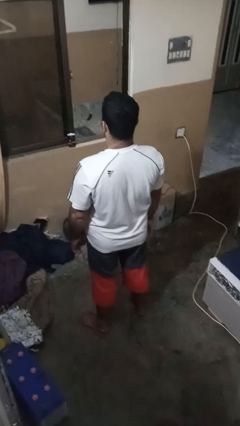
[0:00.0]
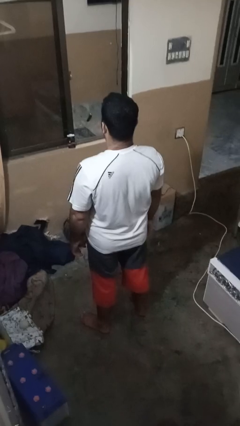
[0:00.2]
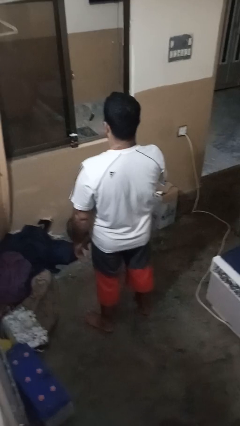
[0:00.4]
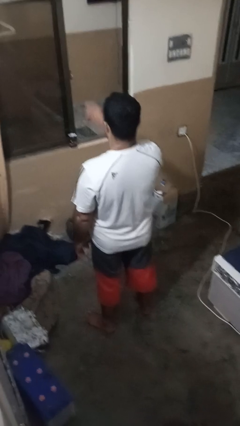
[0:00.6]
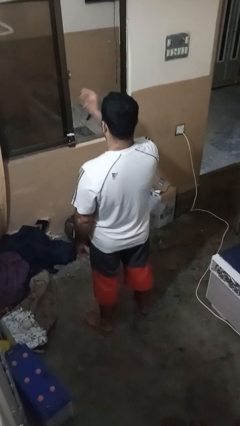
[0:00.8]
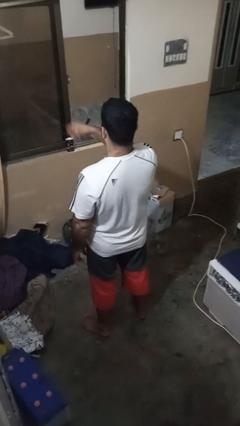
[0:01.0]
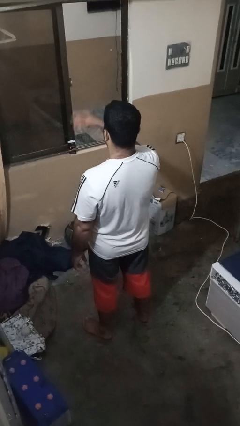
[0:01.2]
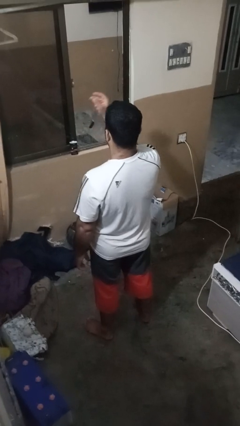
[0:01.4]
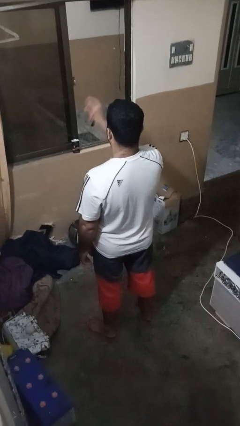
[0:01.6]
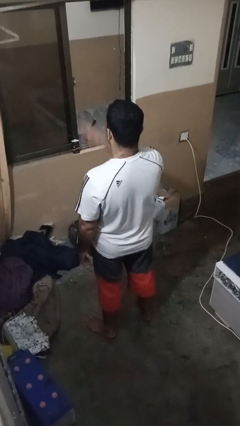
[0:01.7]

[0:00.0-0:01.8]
person snaps fingers

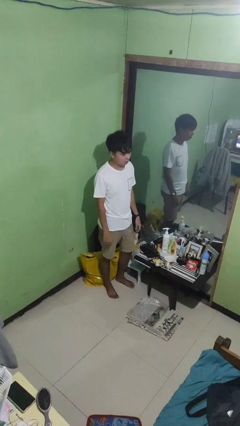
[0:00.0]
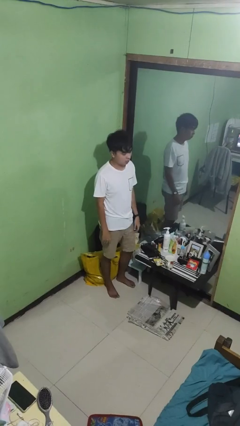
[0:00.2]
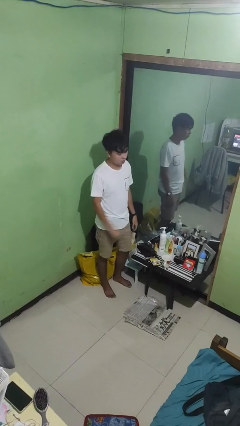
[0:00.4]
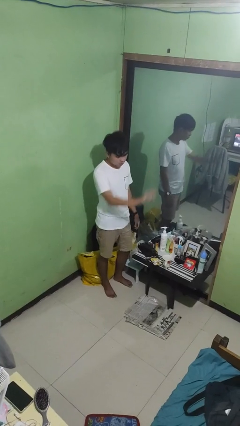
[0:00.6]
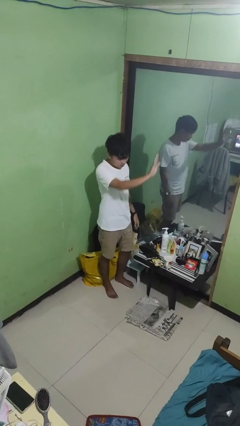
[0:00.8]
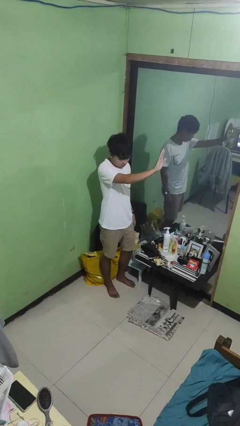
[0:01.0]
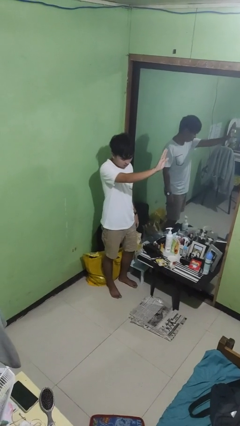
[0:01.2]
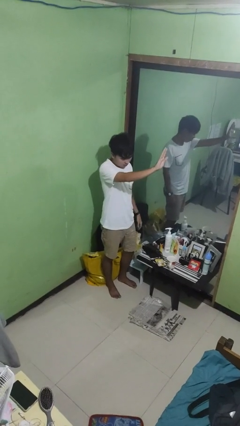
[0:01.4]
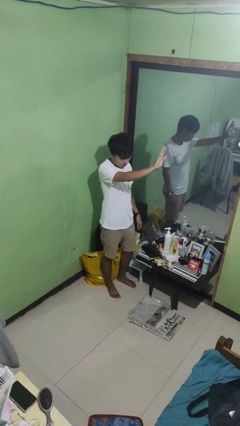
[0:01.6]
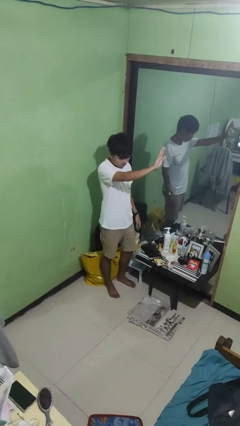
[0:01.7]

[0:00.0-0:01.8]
person gestures stop

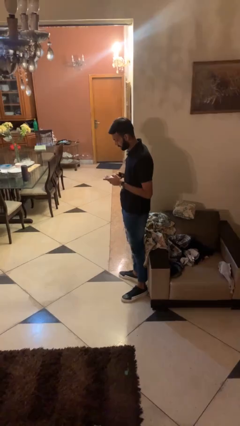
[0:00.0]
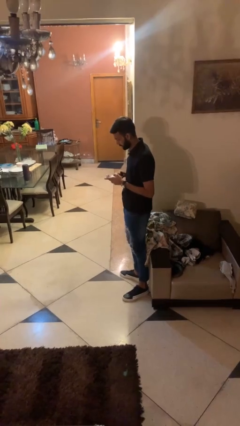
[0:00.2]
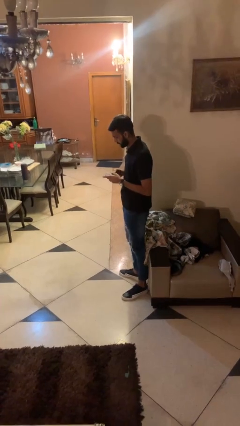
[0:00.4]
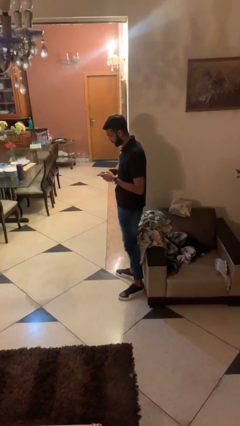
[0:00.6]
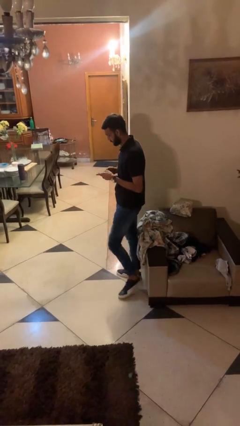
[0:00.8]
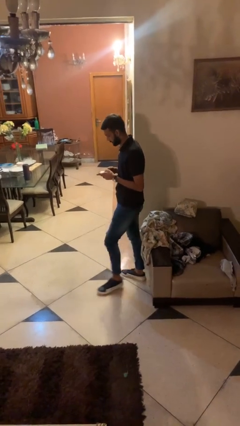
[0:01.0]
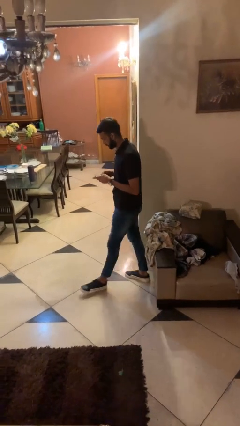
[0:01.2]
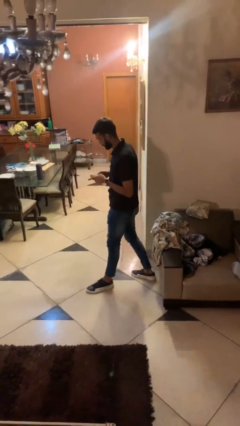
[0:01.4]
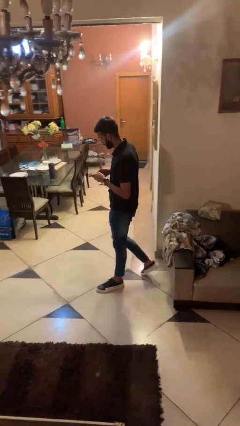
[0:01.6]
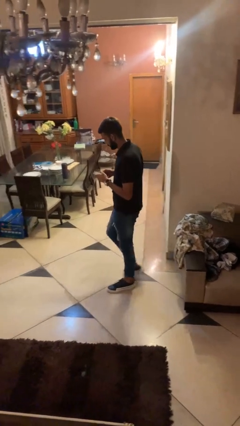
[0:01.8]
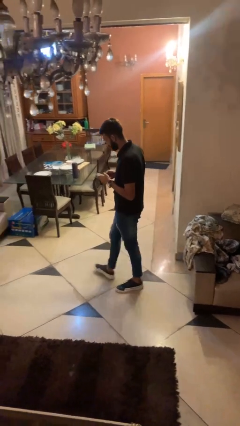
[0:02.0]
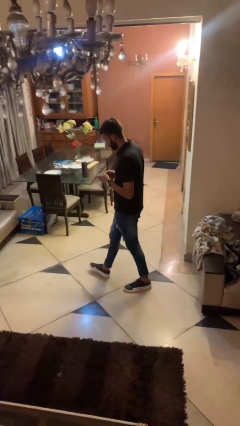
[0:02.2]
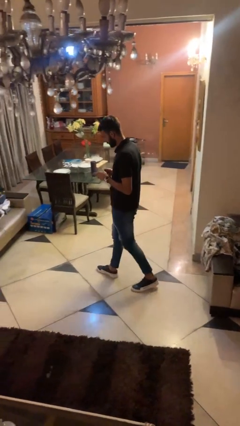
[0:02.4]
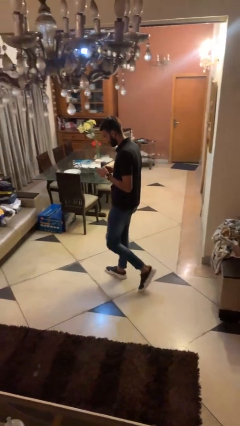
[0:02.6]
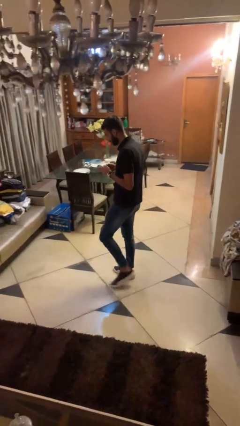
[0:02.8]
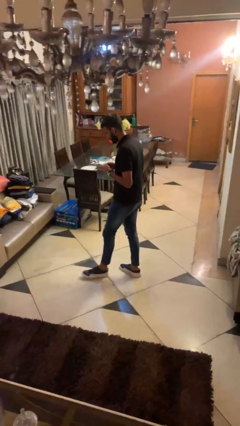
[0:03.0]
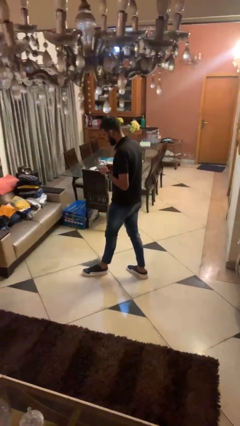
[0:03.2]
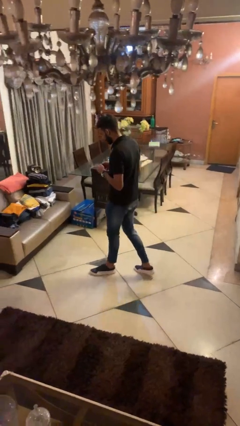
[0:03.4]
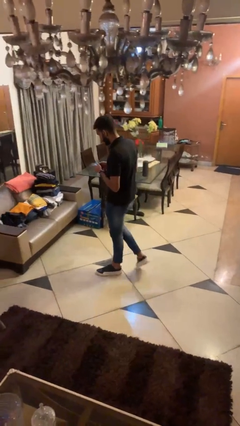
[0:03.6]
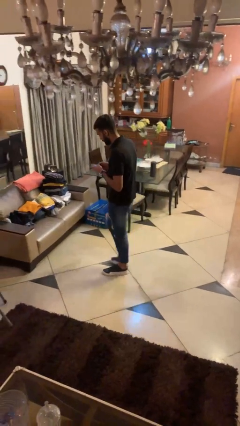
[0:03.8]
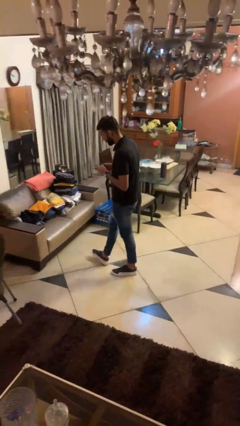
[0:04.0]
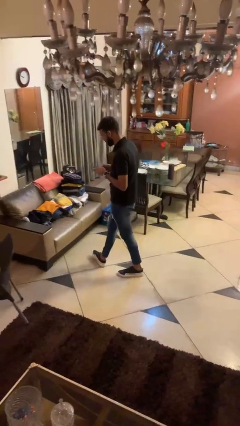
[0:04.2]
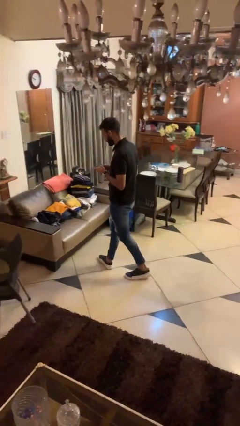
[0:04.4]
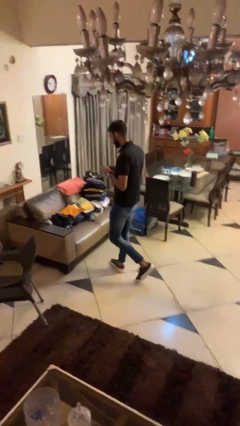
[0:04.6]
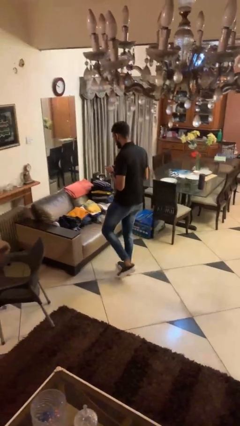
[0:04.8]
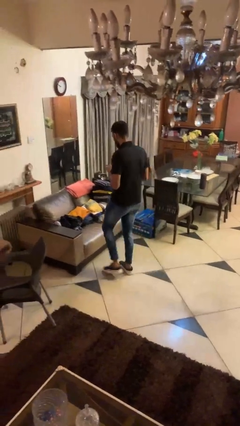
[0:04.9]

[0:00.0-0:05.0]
person texts on phone

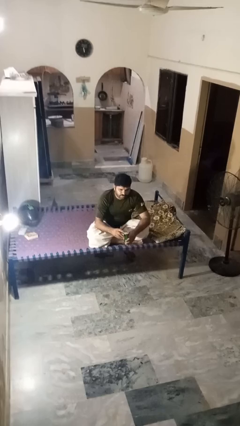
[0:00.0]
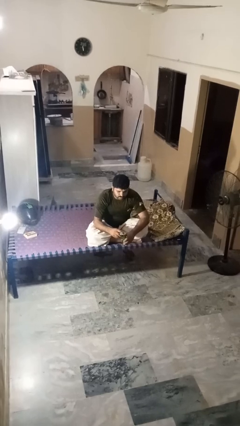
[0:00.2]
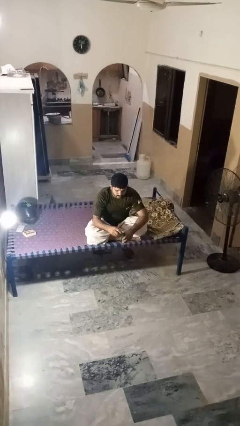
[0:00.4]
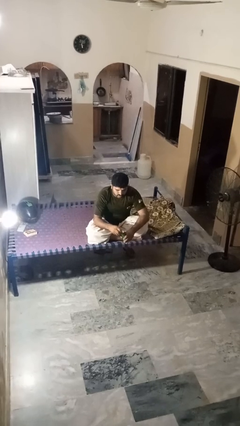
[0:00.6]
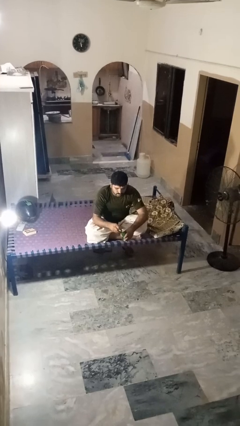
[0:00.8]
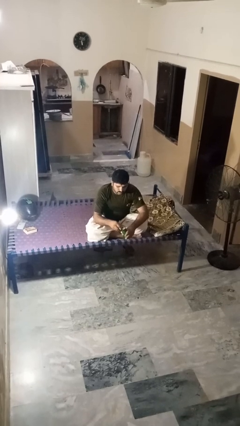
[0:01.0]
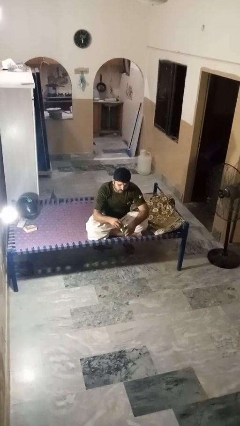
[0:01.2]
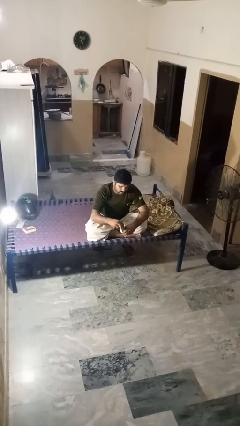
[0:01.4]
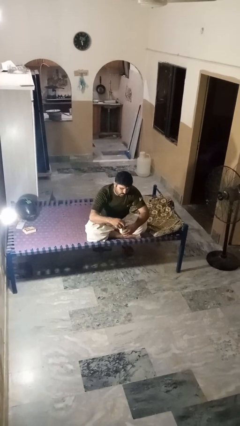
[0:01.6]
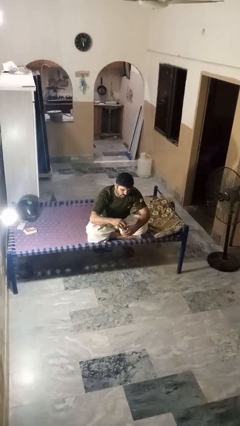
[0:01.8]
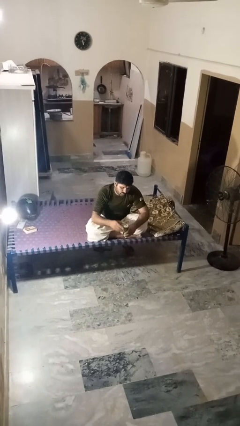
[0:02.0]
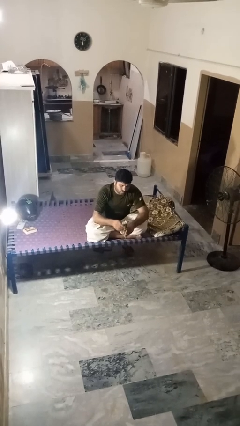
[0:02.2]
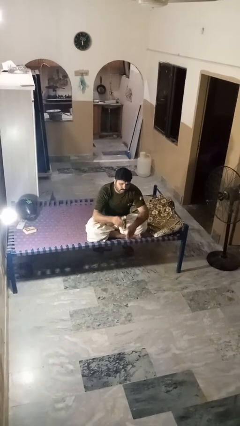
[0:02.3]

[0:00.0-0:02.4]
person opens beverage can

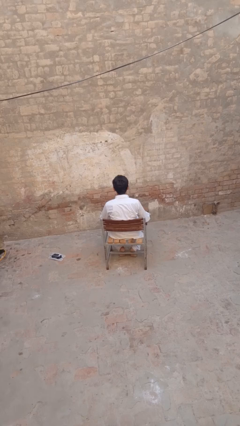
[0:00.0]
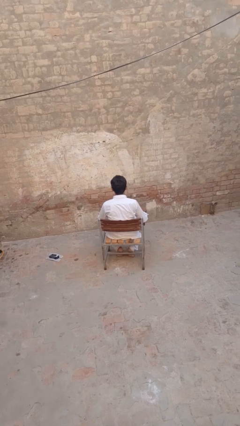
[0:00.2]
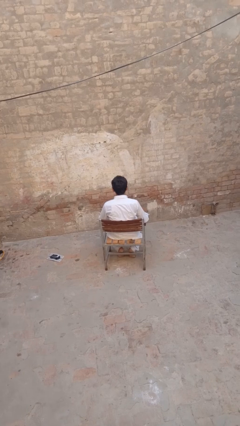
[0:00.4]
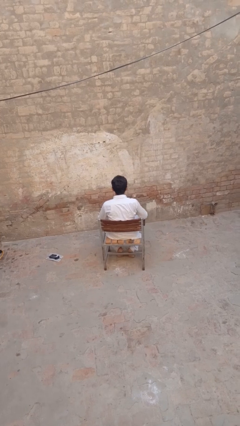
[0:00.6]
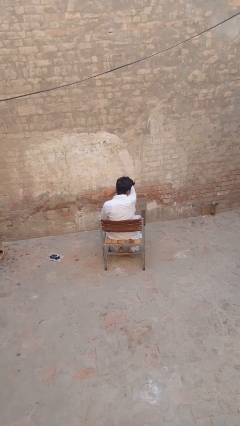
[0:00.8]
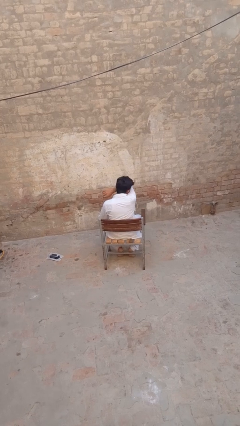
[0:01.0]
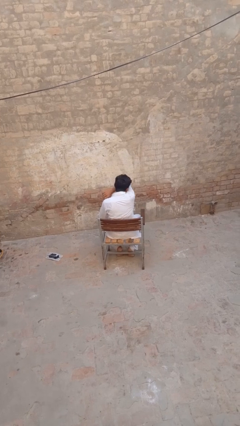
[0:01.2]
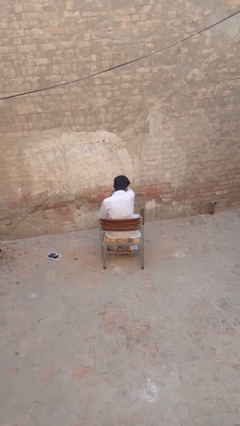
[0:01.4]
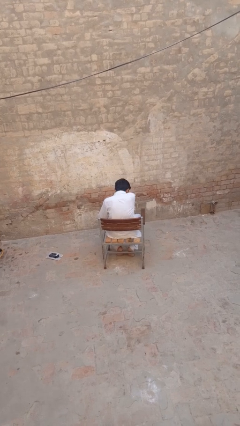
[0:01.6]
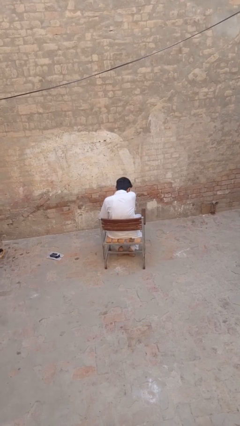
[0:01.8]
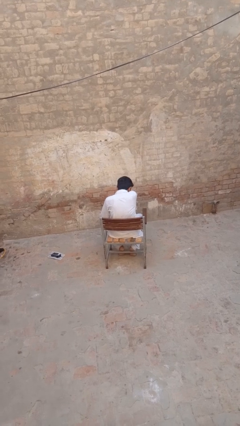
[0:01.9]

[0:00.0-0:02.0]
person sneezes into arm

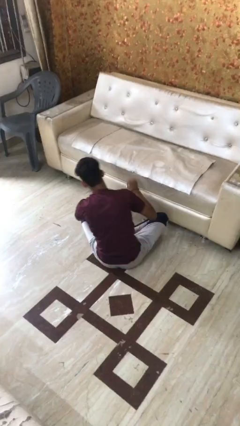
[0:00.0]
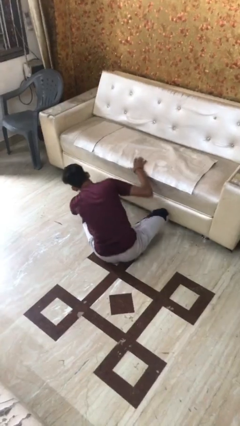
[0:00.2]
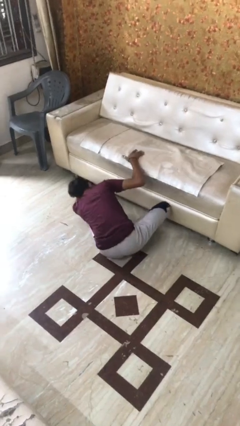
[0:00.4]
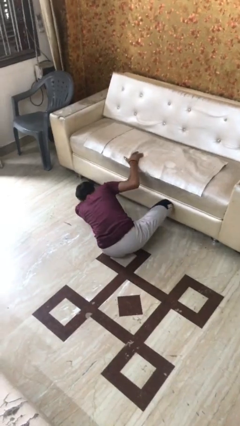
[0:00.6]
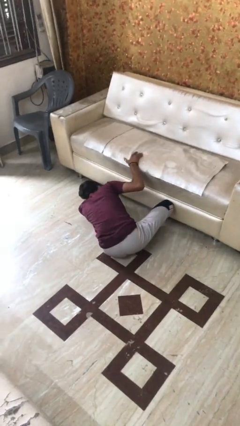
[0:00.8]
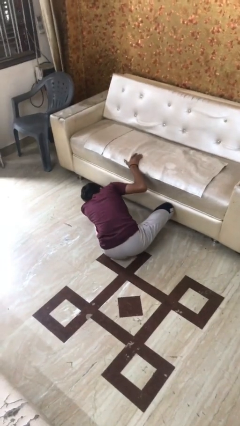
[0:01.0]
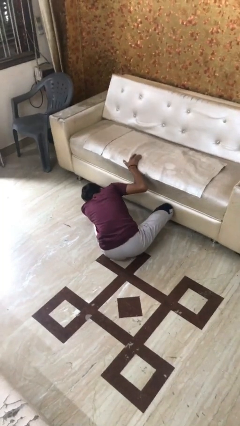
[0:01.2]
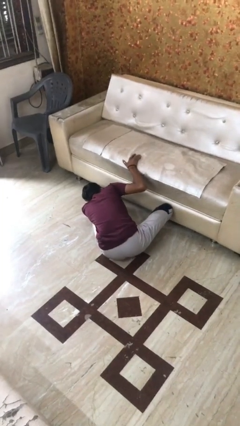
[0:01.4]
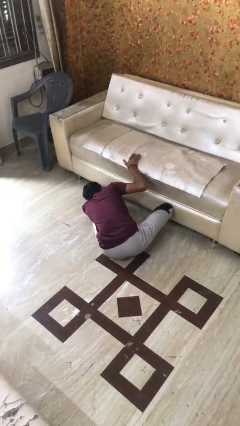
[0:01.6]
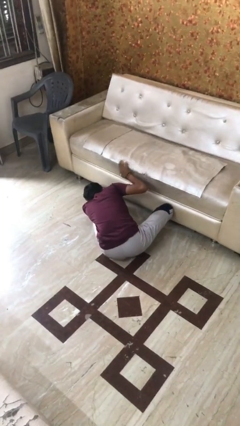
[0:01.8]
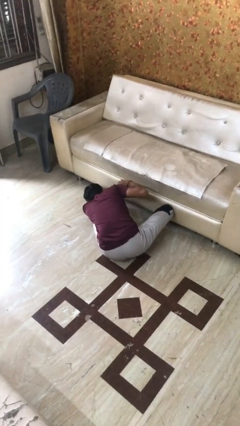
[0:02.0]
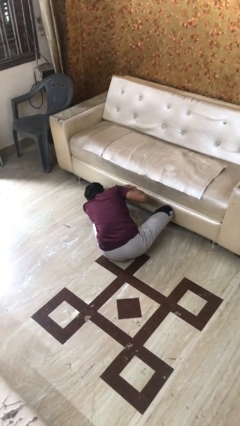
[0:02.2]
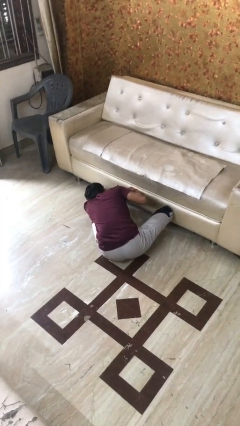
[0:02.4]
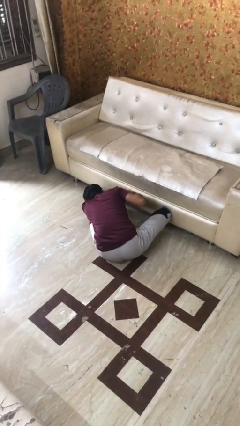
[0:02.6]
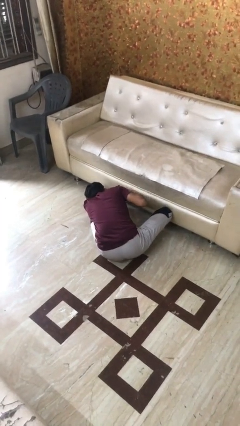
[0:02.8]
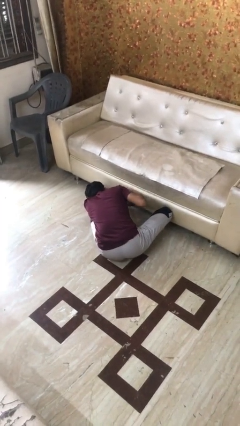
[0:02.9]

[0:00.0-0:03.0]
person searches under bed

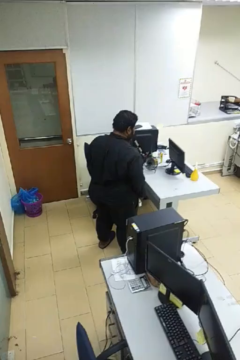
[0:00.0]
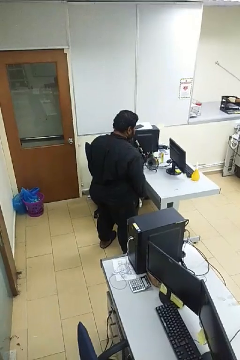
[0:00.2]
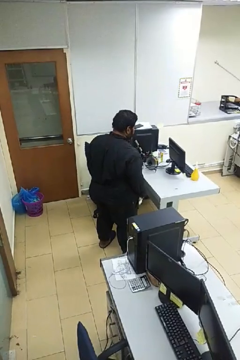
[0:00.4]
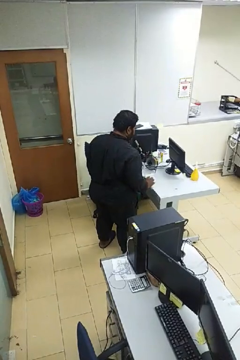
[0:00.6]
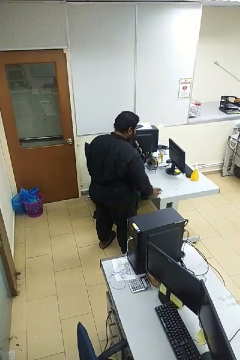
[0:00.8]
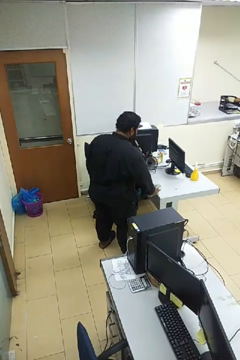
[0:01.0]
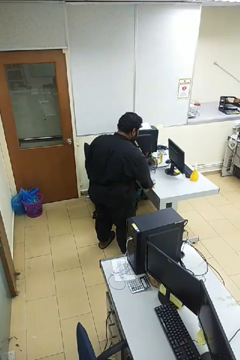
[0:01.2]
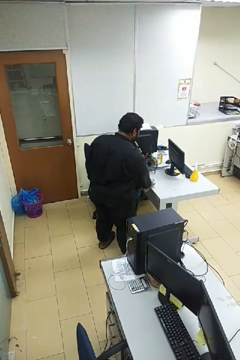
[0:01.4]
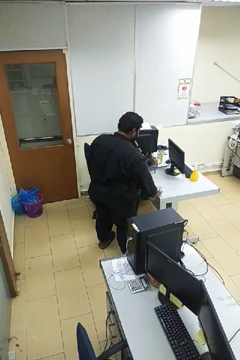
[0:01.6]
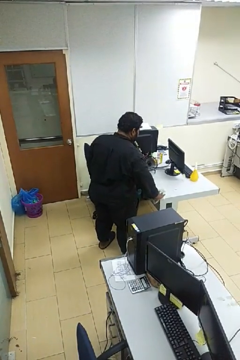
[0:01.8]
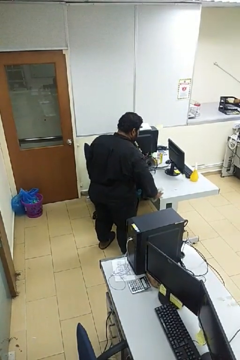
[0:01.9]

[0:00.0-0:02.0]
person cleans table with rag
